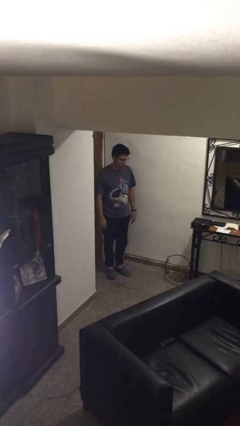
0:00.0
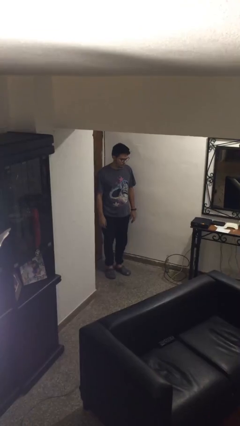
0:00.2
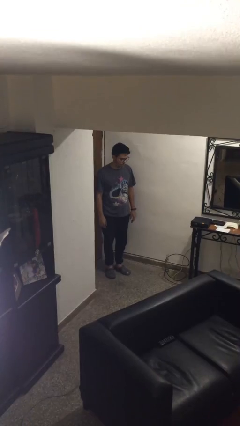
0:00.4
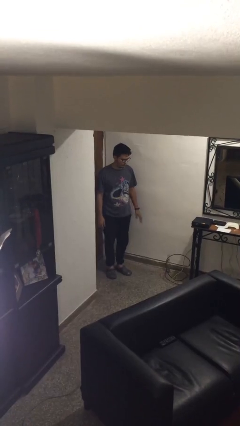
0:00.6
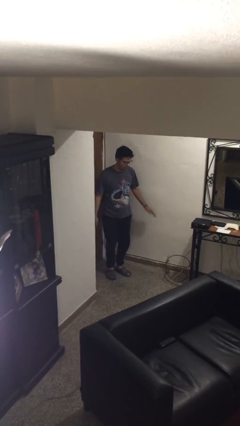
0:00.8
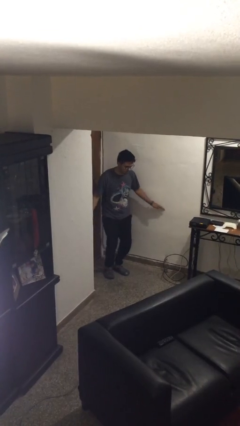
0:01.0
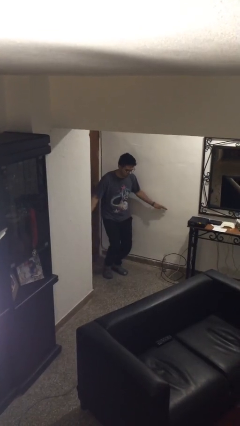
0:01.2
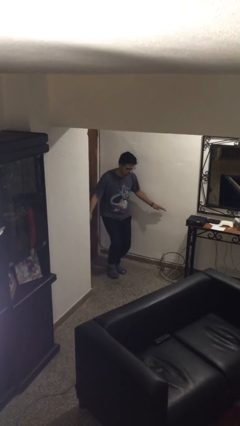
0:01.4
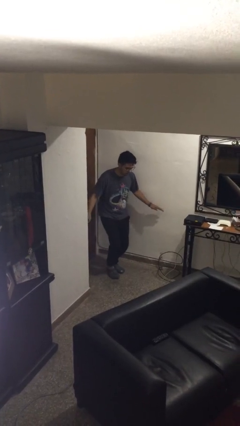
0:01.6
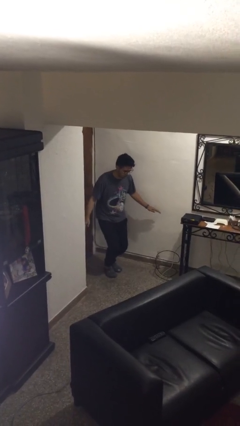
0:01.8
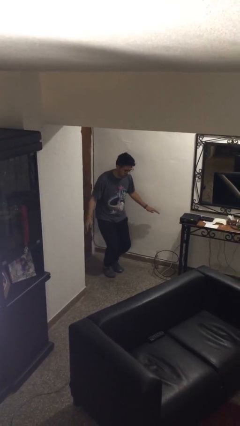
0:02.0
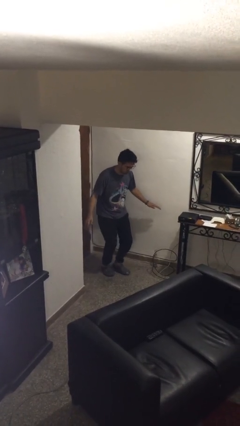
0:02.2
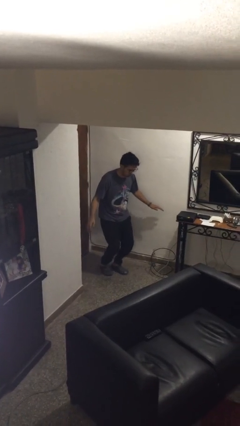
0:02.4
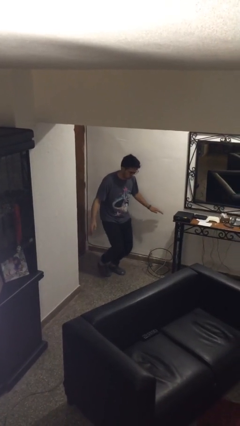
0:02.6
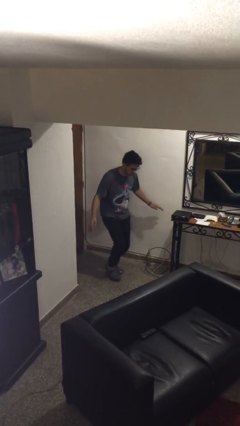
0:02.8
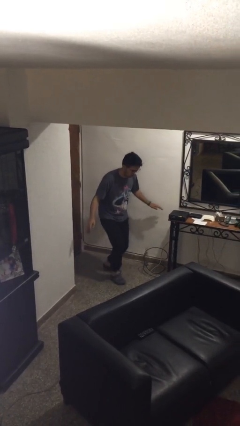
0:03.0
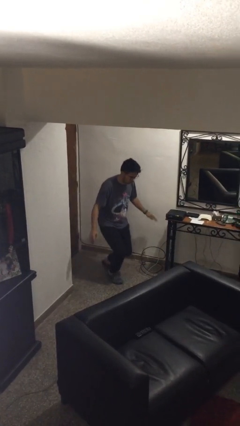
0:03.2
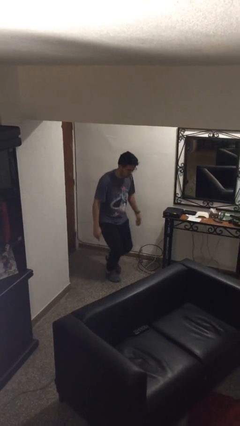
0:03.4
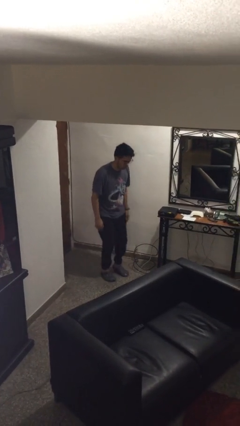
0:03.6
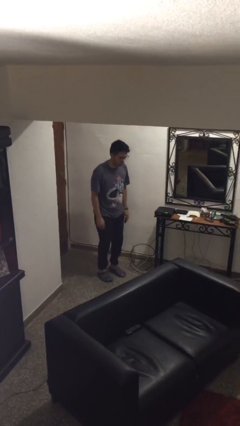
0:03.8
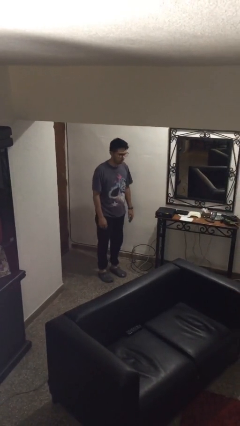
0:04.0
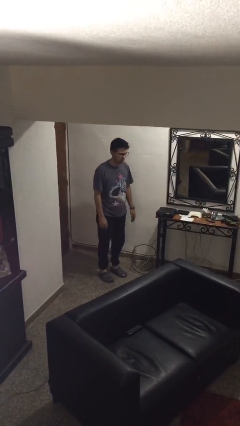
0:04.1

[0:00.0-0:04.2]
person walks tiptoe

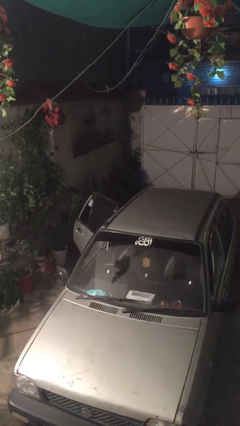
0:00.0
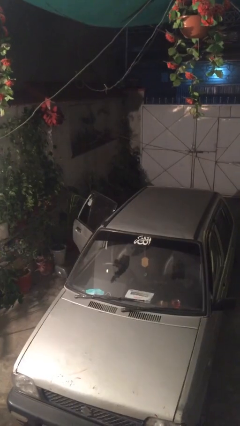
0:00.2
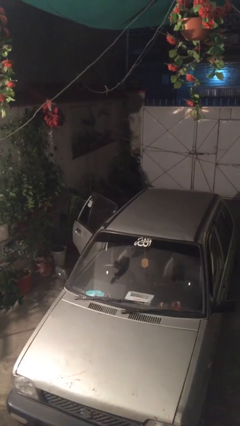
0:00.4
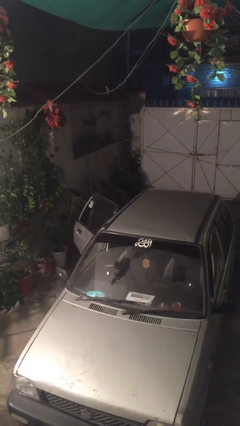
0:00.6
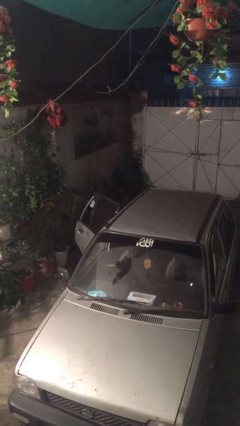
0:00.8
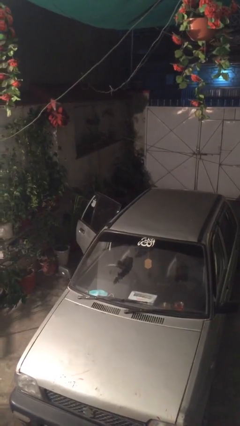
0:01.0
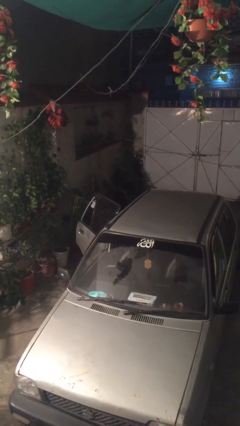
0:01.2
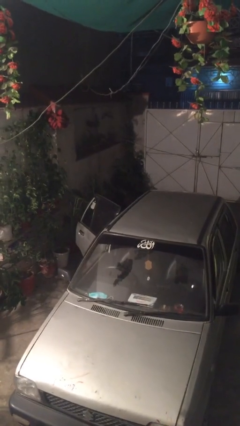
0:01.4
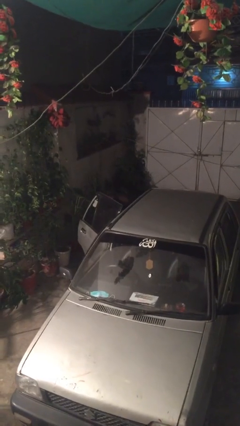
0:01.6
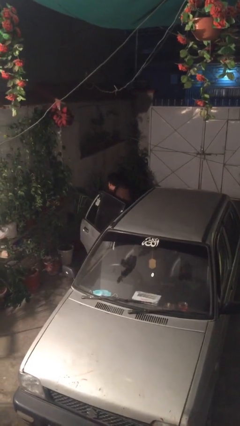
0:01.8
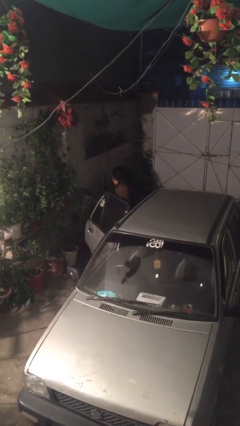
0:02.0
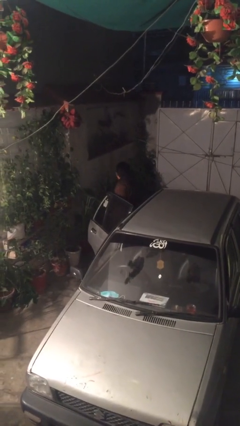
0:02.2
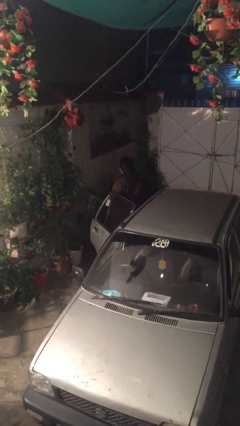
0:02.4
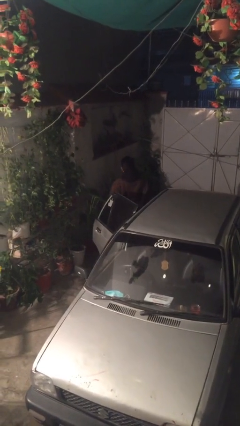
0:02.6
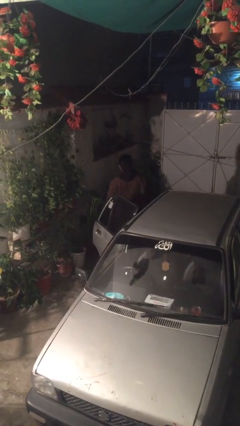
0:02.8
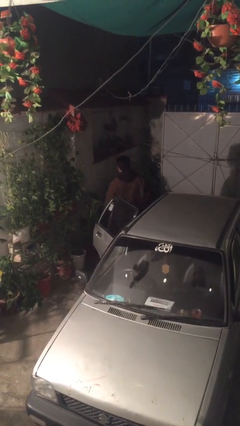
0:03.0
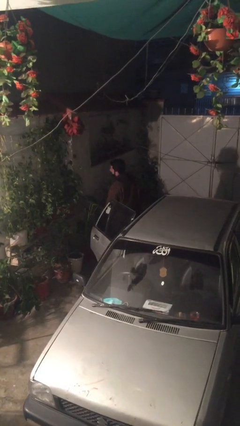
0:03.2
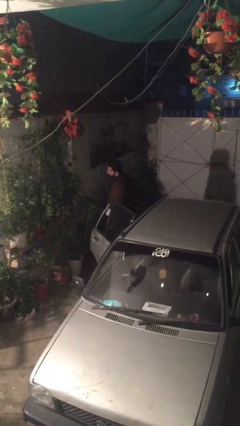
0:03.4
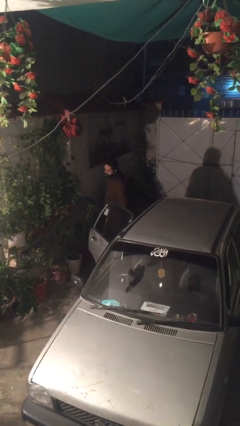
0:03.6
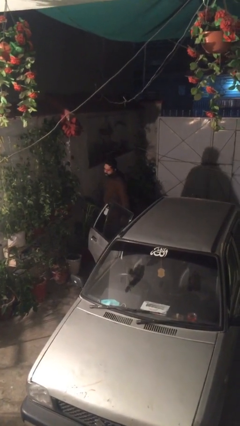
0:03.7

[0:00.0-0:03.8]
person exits car

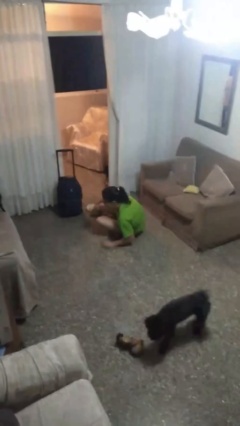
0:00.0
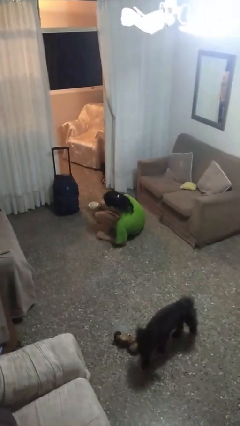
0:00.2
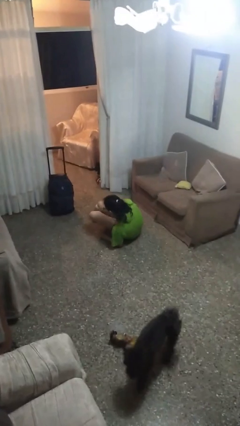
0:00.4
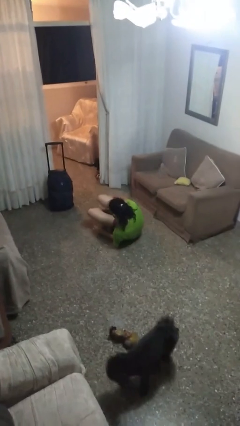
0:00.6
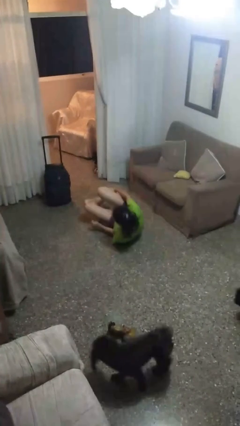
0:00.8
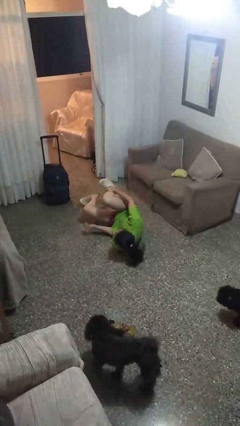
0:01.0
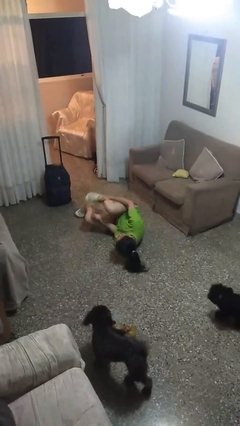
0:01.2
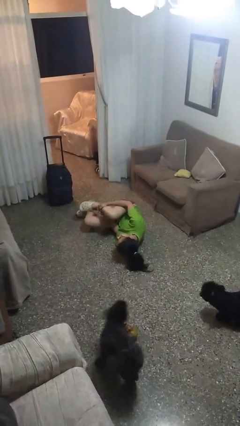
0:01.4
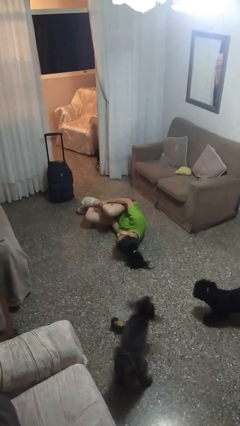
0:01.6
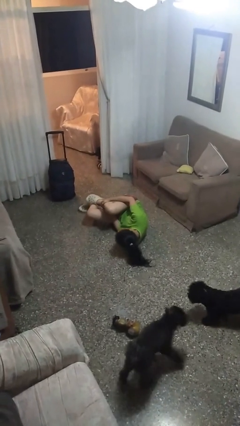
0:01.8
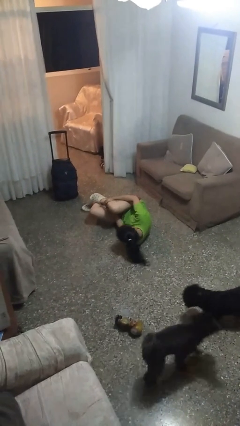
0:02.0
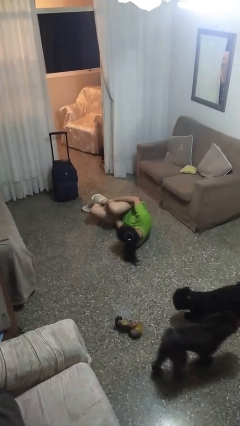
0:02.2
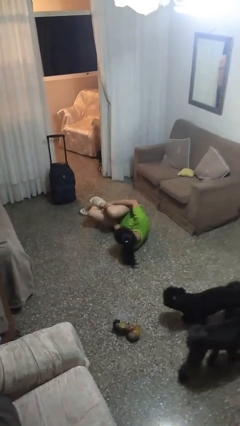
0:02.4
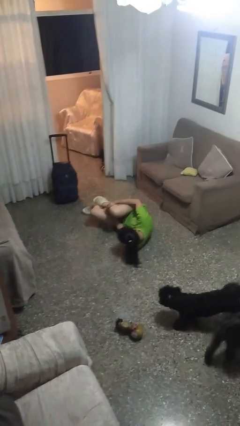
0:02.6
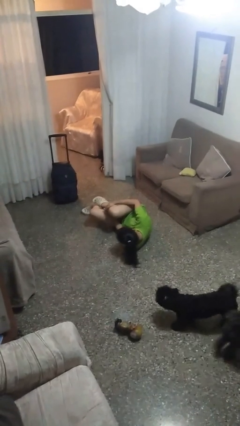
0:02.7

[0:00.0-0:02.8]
person lies down on floor

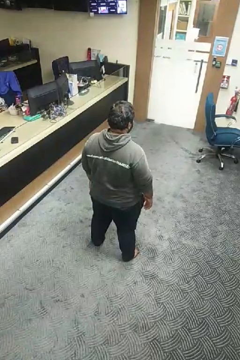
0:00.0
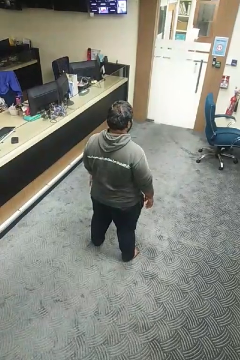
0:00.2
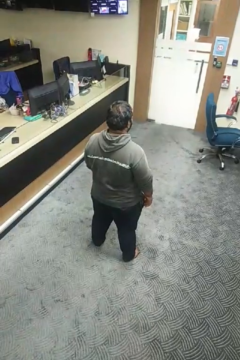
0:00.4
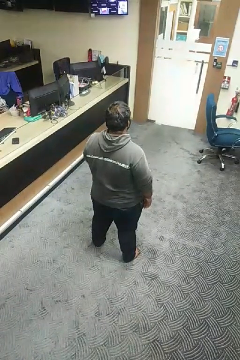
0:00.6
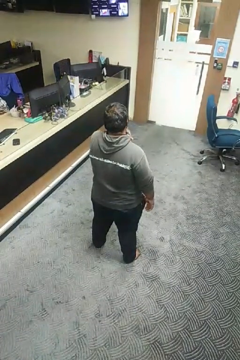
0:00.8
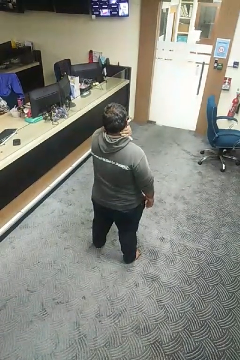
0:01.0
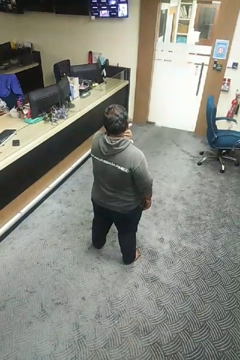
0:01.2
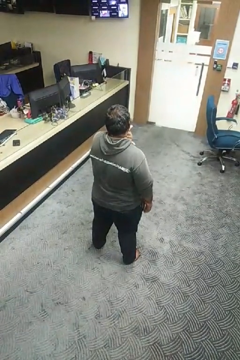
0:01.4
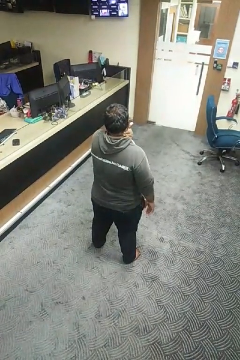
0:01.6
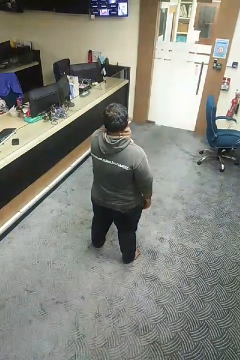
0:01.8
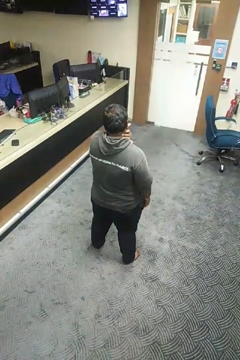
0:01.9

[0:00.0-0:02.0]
person rubs neck

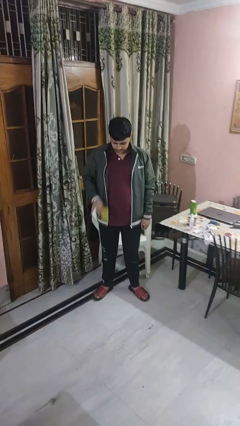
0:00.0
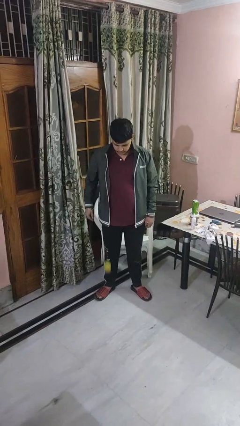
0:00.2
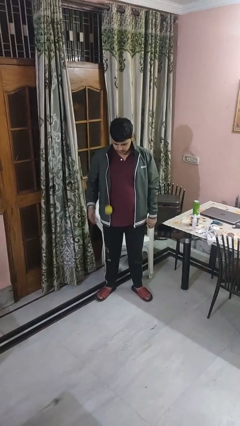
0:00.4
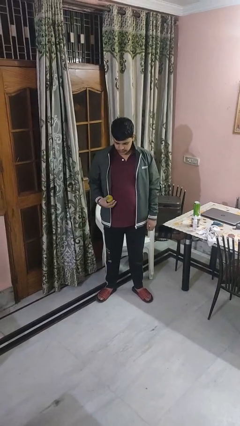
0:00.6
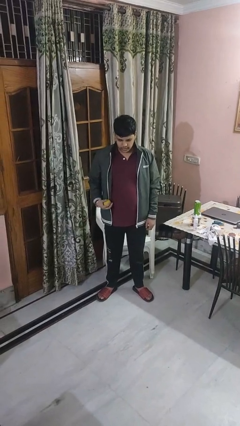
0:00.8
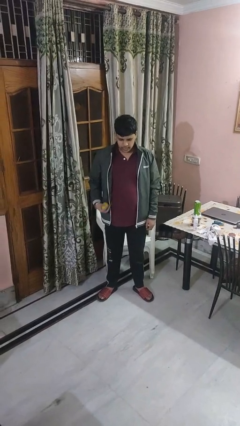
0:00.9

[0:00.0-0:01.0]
person bounces ball on floor

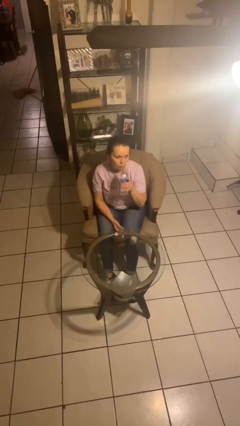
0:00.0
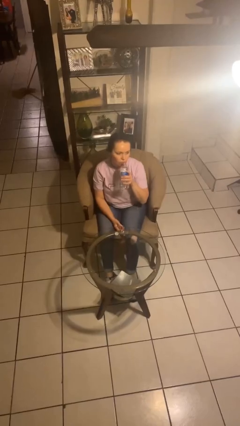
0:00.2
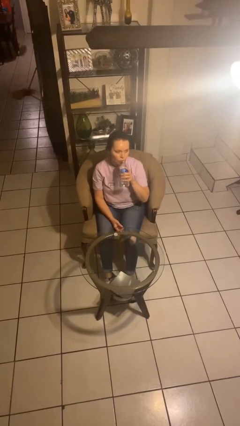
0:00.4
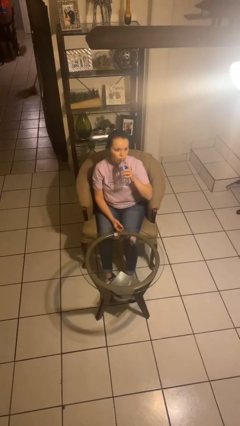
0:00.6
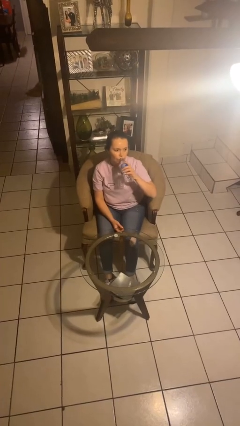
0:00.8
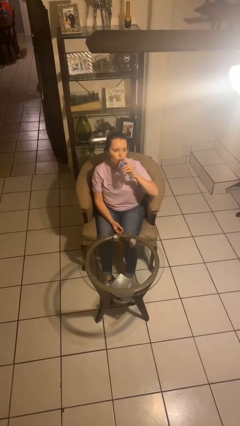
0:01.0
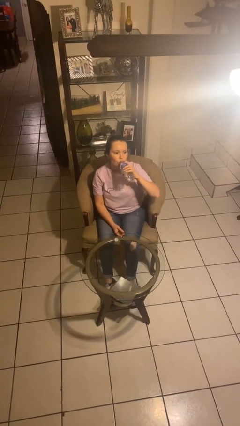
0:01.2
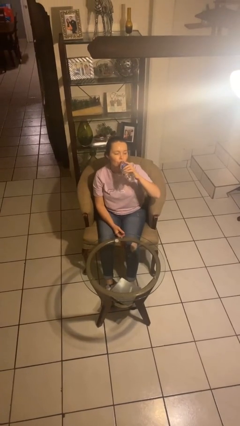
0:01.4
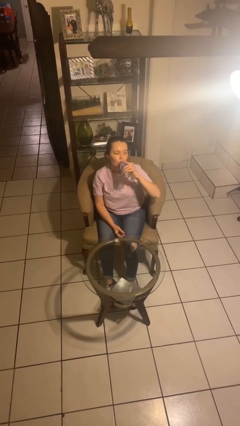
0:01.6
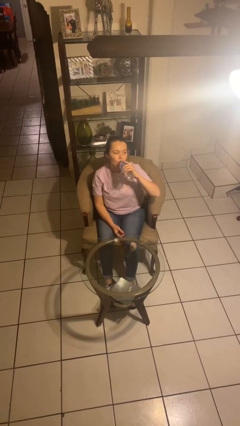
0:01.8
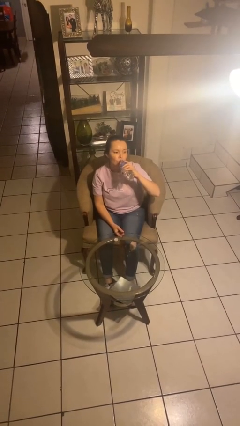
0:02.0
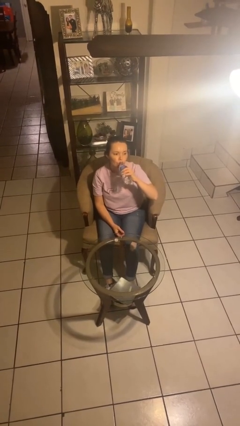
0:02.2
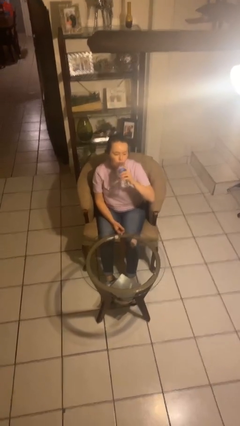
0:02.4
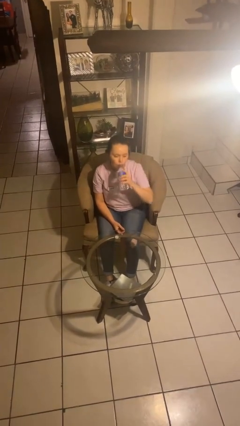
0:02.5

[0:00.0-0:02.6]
person drinks from bottle

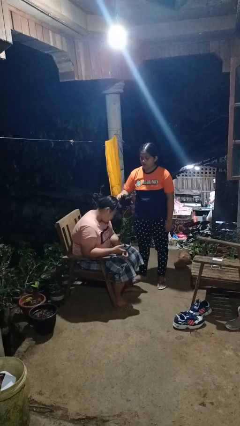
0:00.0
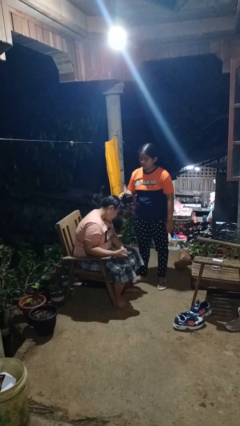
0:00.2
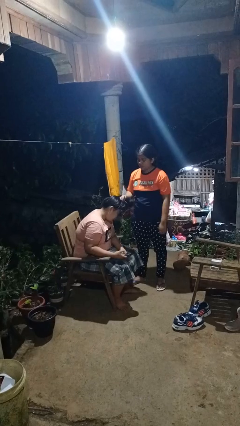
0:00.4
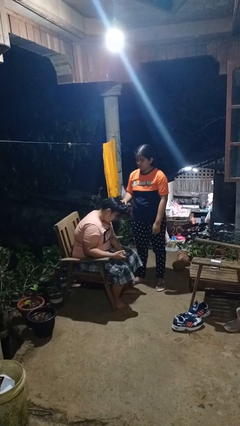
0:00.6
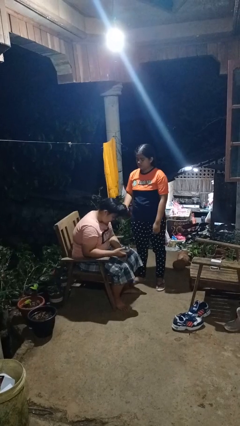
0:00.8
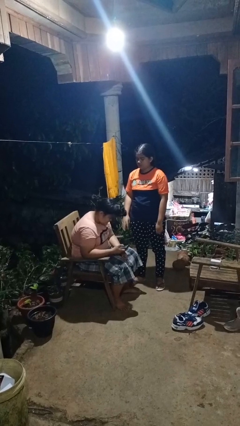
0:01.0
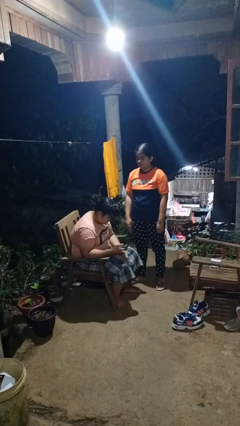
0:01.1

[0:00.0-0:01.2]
person grabs person by hair
